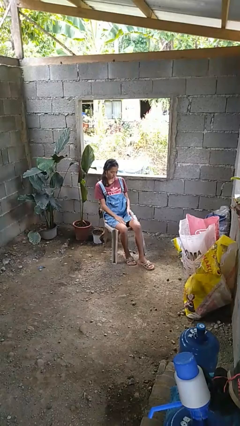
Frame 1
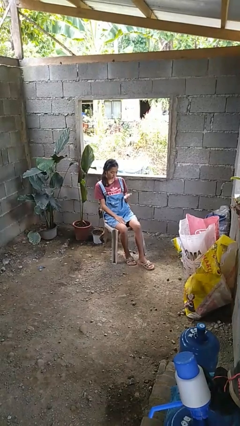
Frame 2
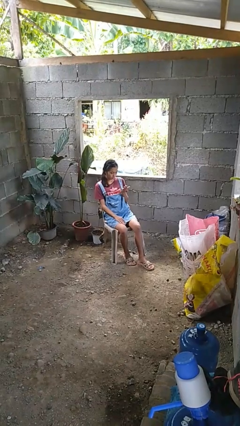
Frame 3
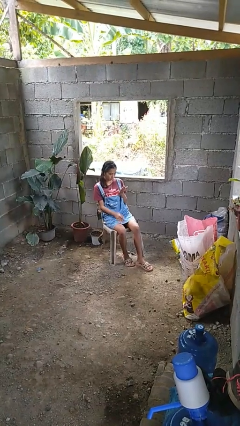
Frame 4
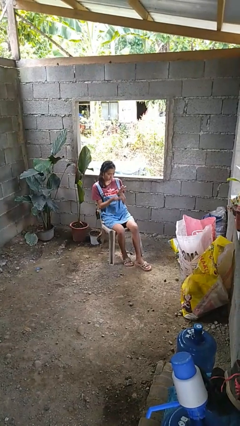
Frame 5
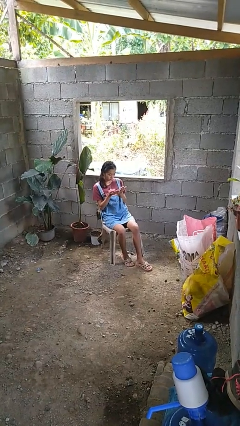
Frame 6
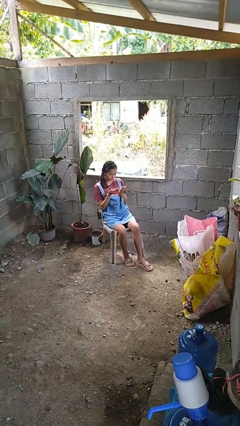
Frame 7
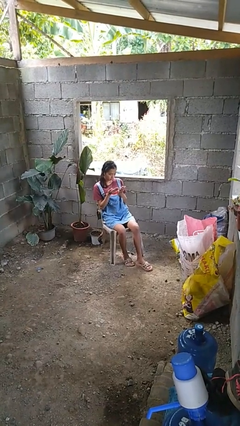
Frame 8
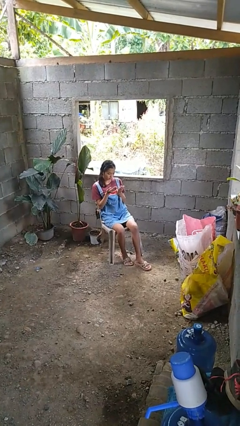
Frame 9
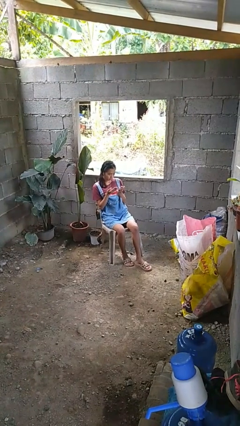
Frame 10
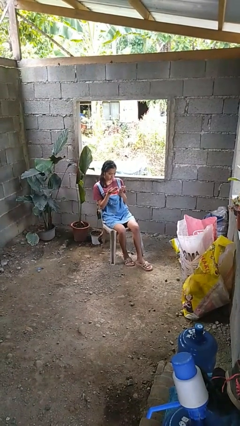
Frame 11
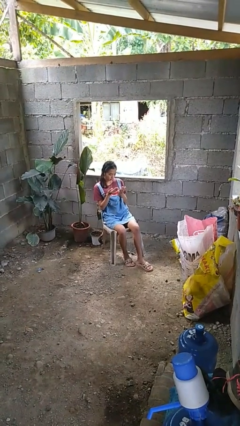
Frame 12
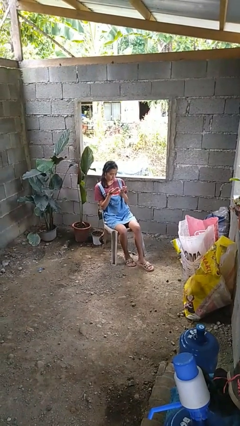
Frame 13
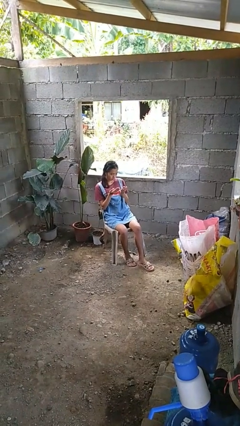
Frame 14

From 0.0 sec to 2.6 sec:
person looks at hands in lap

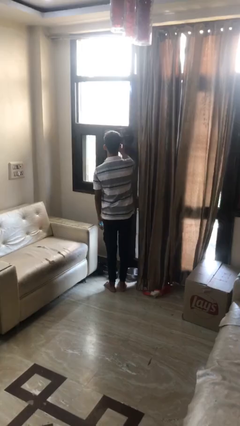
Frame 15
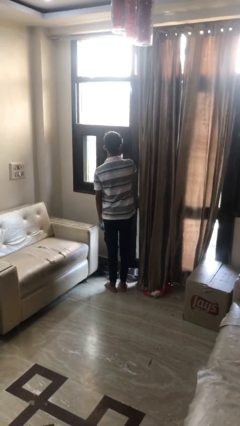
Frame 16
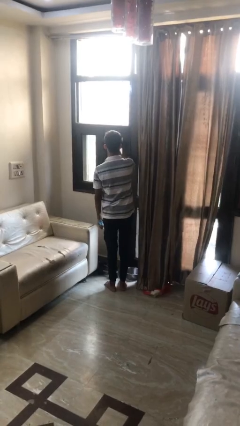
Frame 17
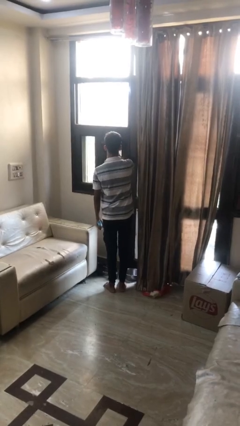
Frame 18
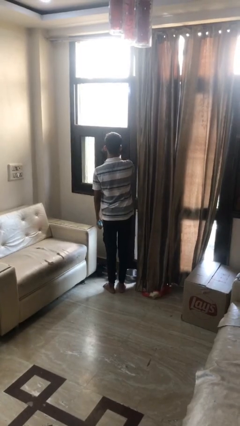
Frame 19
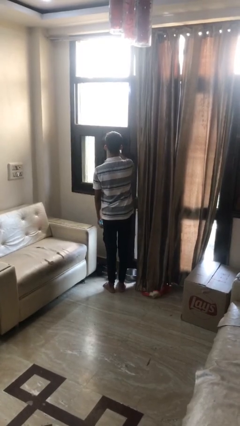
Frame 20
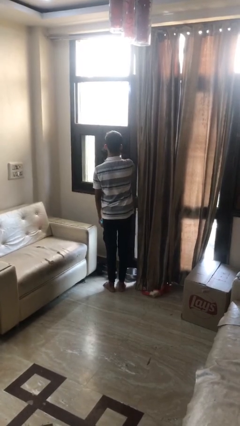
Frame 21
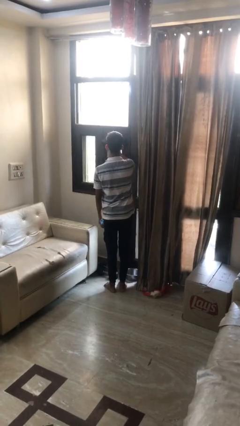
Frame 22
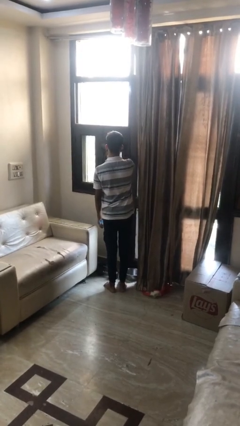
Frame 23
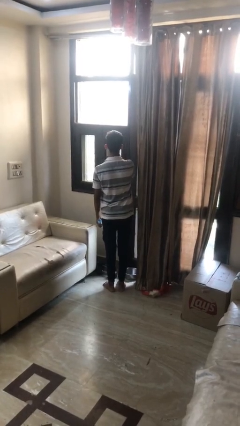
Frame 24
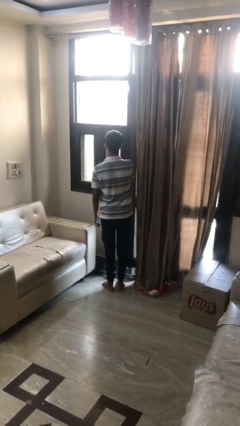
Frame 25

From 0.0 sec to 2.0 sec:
person washes window

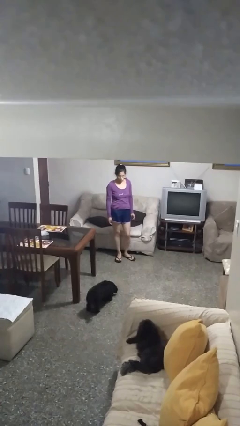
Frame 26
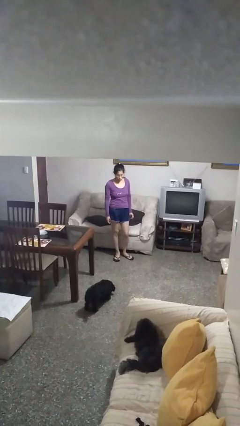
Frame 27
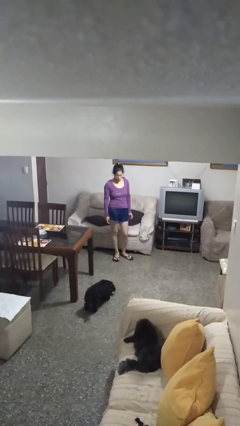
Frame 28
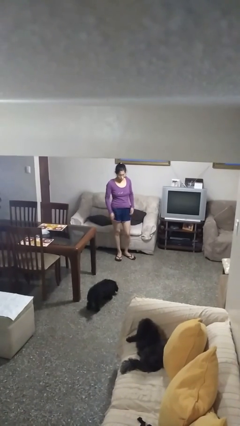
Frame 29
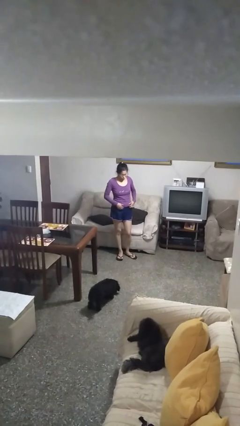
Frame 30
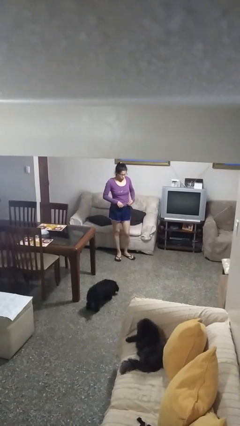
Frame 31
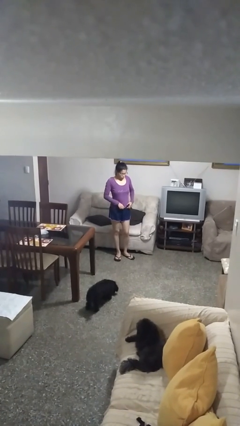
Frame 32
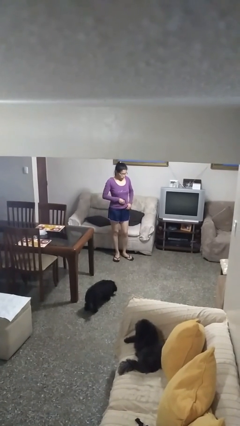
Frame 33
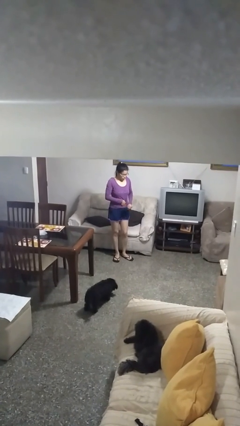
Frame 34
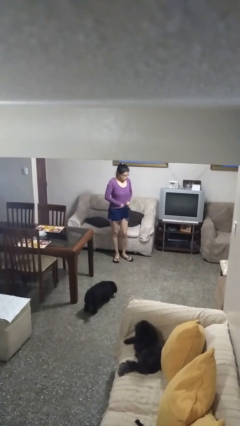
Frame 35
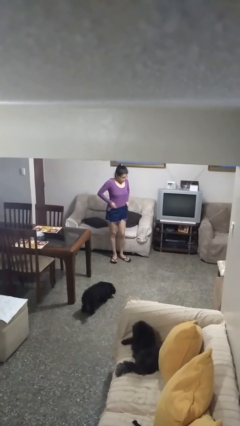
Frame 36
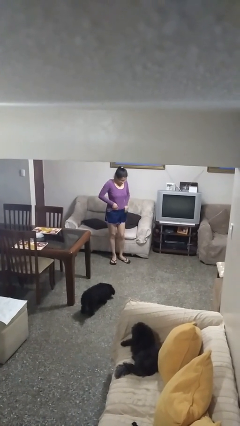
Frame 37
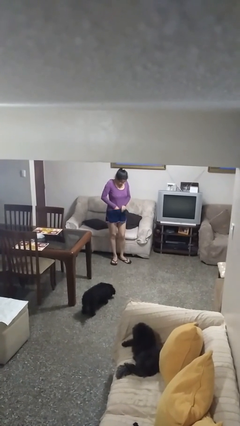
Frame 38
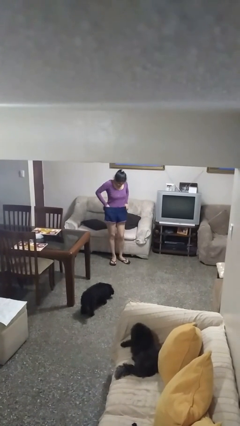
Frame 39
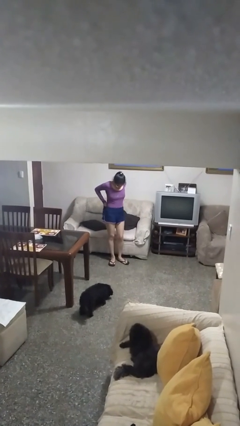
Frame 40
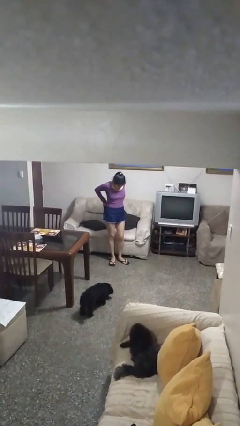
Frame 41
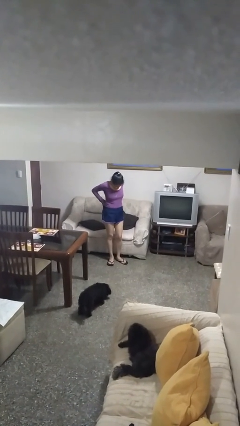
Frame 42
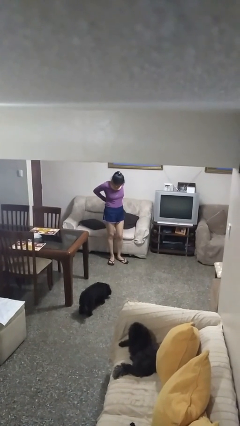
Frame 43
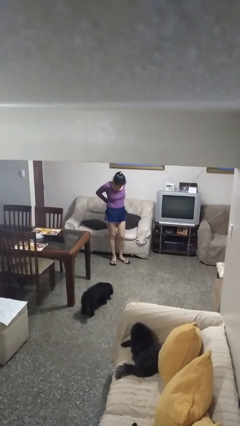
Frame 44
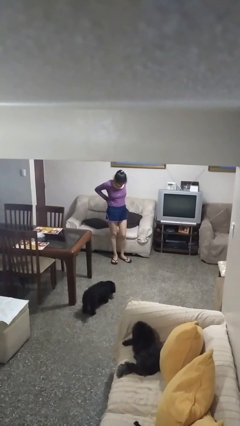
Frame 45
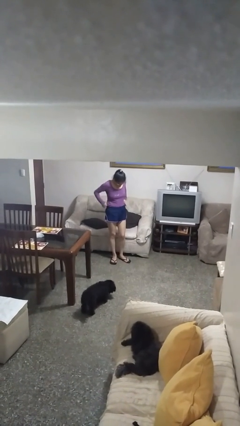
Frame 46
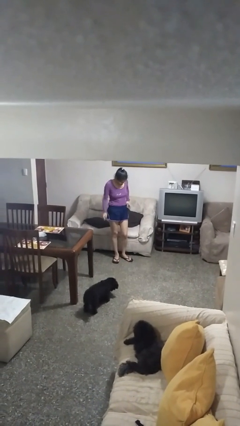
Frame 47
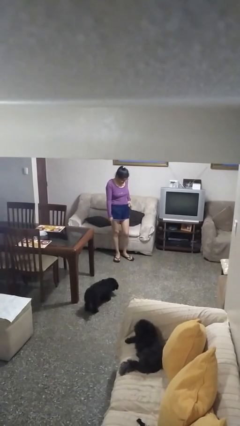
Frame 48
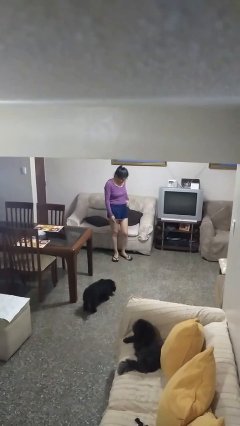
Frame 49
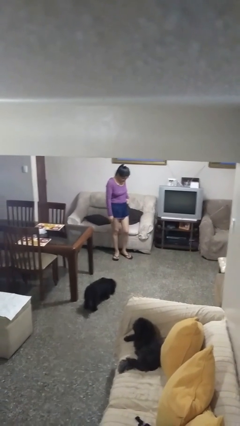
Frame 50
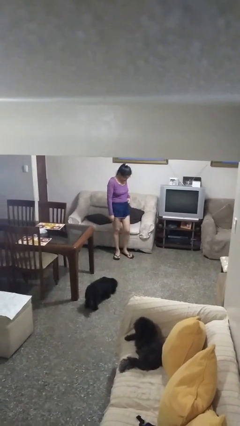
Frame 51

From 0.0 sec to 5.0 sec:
person tucks in shirt

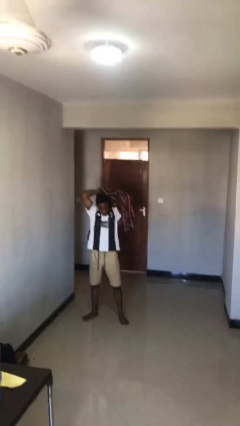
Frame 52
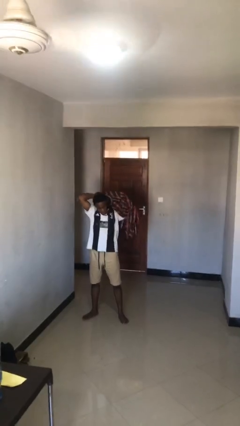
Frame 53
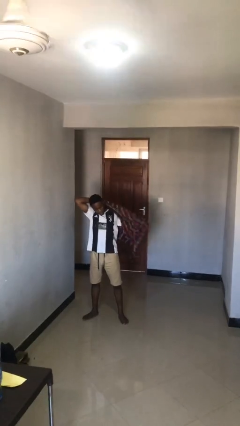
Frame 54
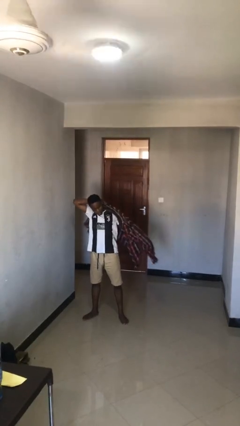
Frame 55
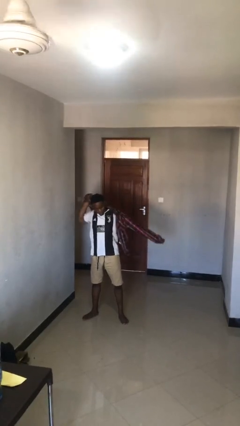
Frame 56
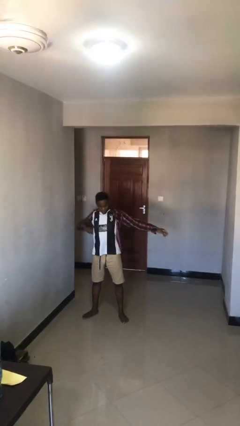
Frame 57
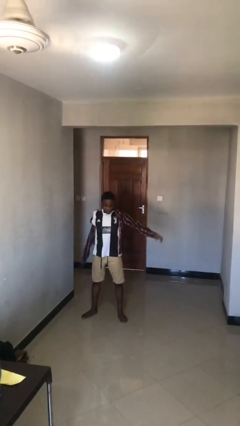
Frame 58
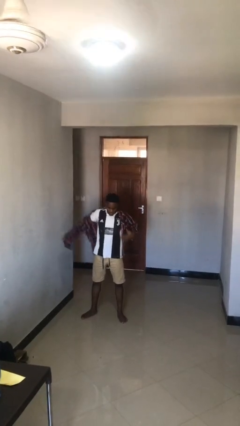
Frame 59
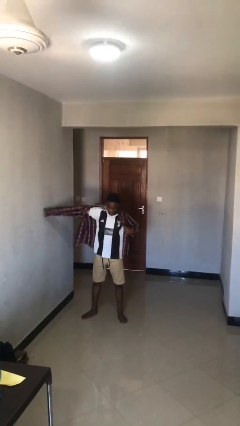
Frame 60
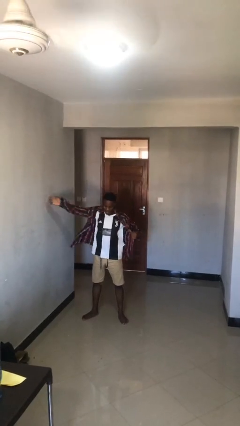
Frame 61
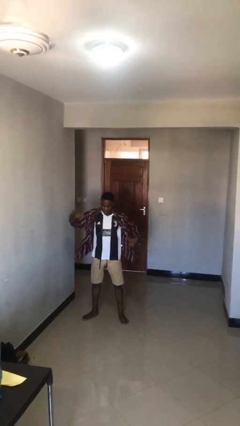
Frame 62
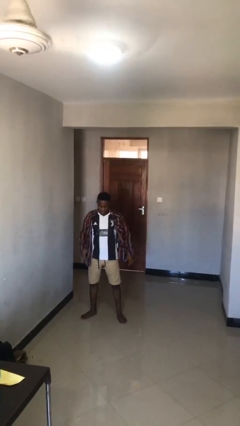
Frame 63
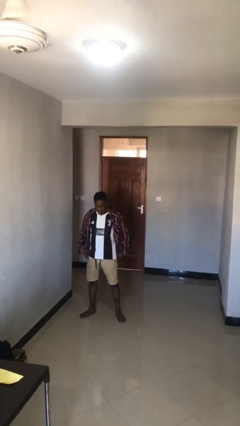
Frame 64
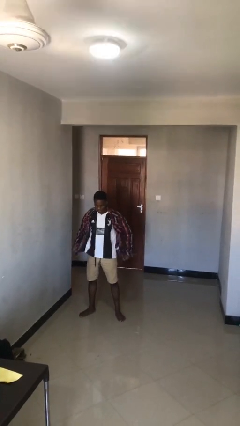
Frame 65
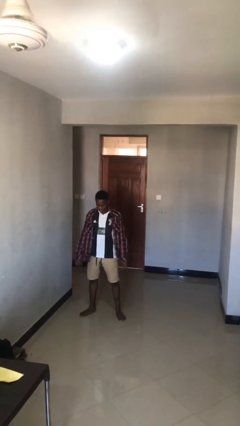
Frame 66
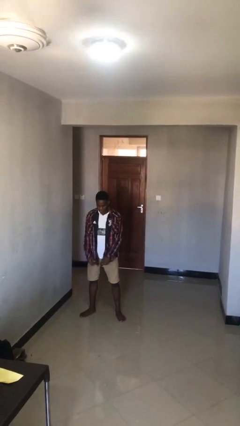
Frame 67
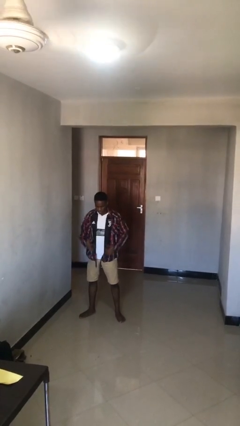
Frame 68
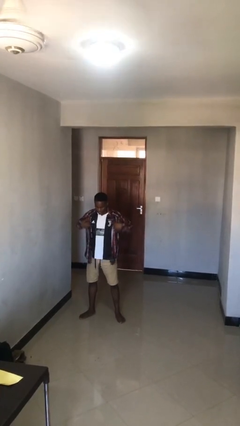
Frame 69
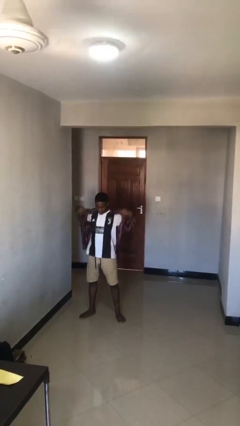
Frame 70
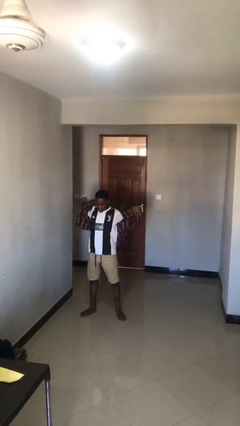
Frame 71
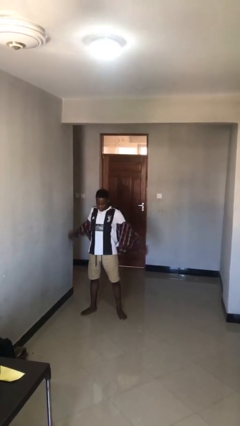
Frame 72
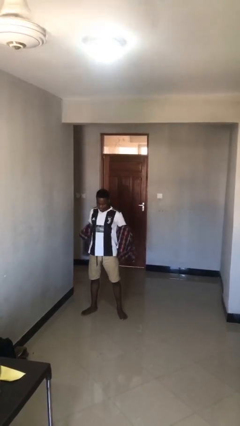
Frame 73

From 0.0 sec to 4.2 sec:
person puts on shirt

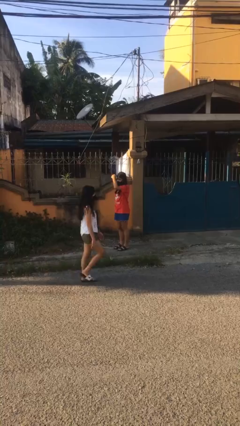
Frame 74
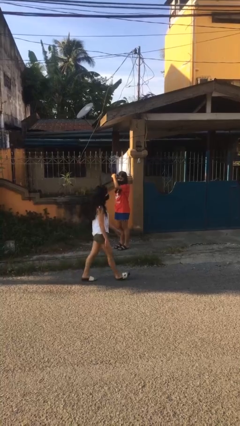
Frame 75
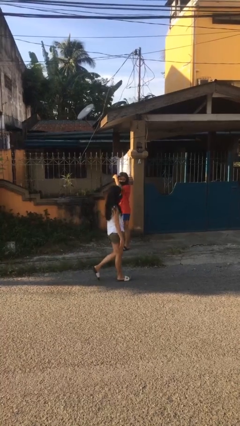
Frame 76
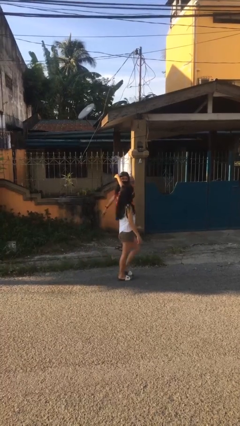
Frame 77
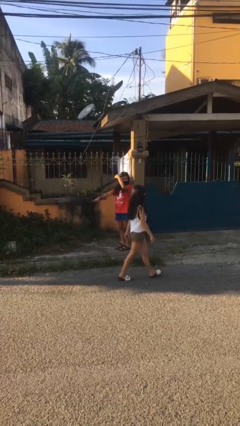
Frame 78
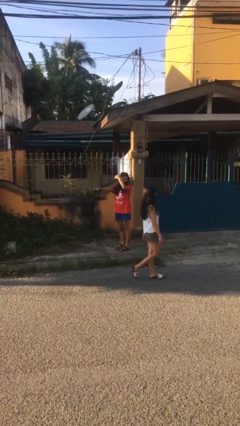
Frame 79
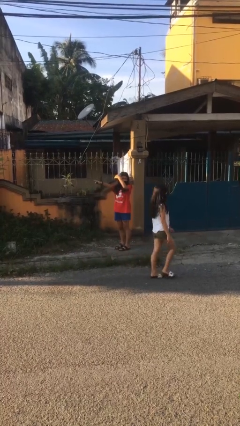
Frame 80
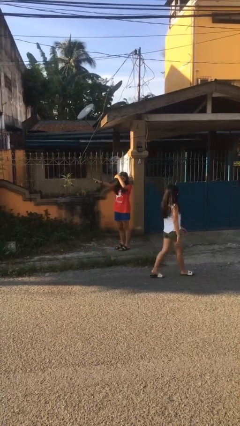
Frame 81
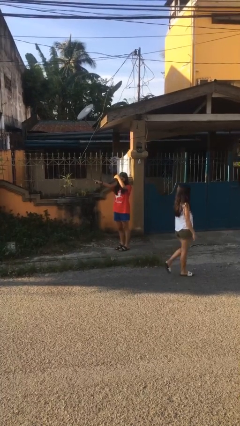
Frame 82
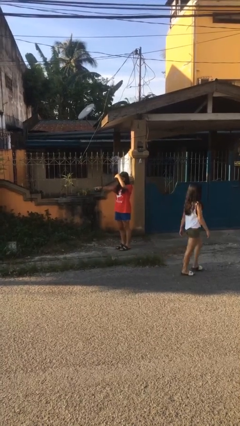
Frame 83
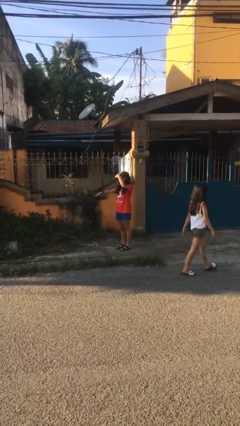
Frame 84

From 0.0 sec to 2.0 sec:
person points at person

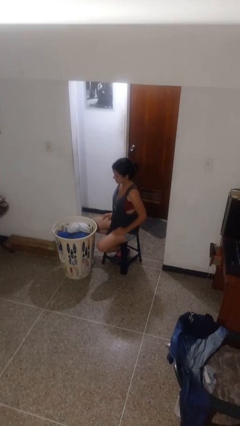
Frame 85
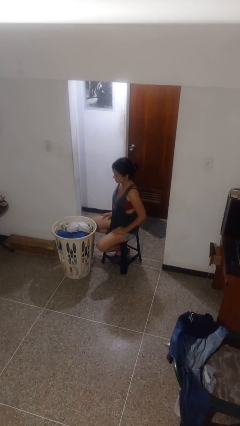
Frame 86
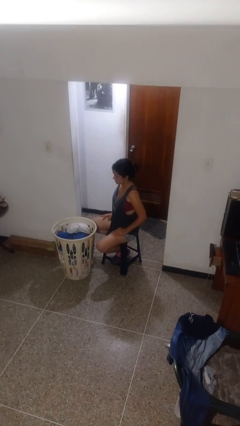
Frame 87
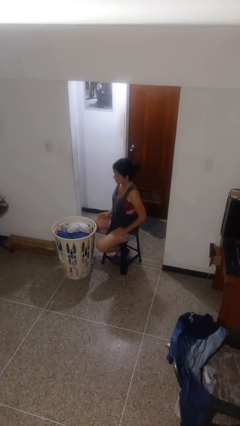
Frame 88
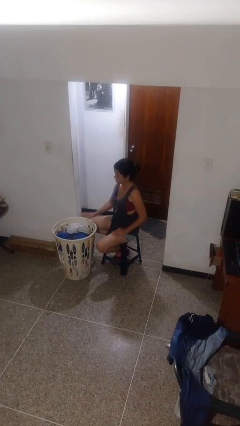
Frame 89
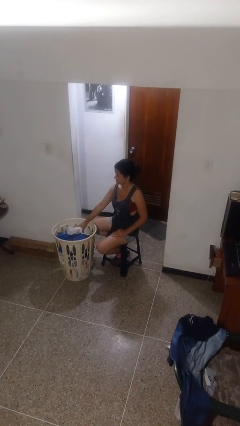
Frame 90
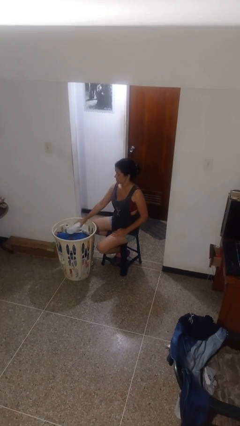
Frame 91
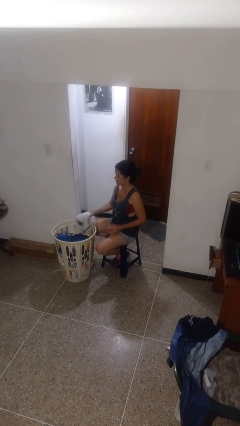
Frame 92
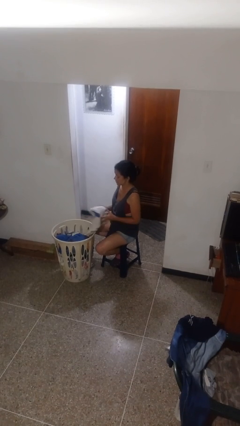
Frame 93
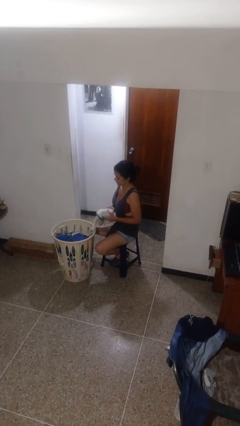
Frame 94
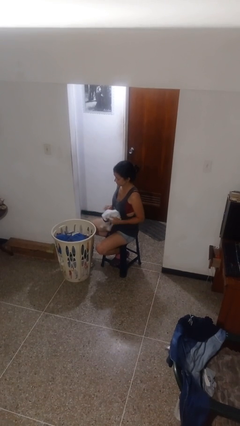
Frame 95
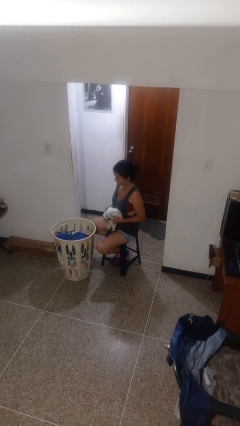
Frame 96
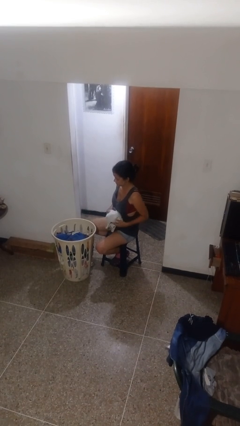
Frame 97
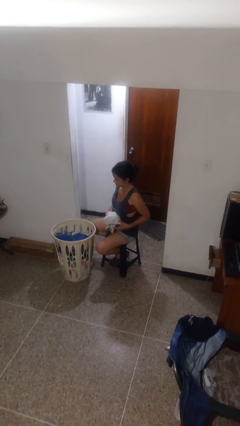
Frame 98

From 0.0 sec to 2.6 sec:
person takes object from basket
